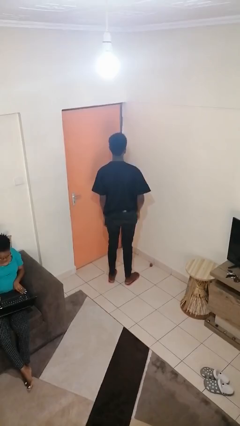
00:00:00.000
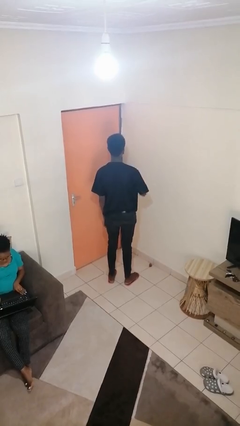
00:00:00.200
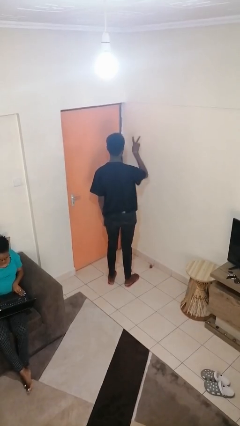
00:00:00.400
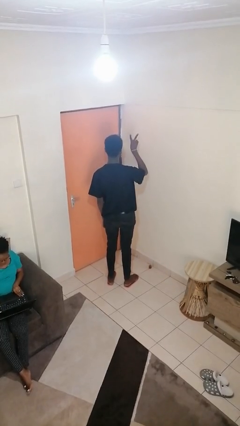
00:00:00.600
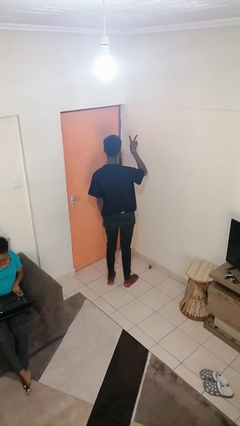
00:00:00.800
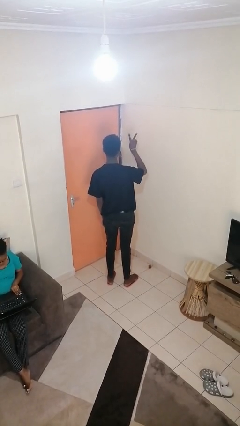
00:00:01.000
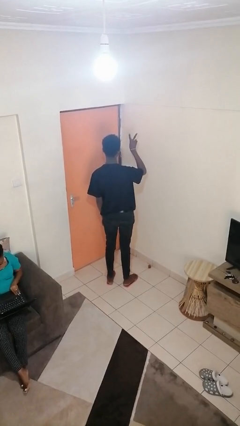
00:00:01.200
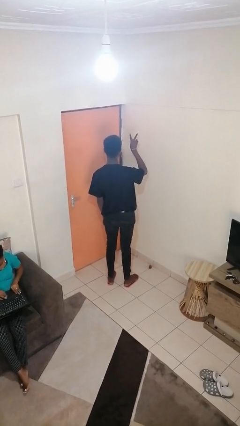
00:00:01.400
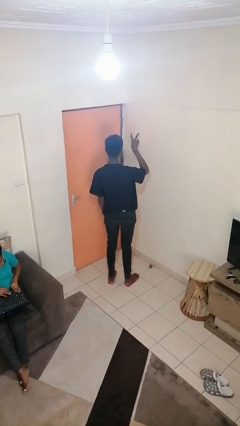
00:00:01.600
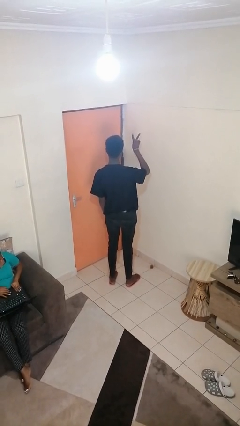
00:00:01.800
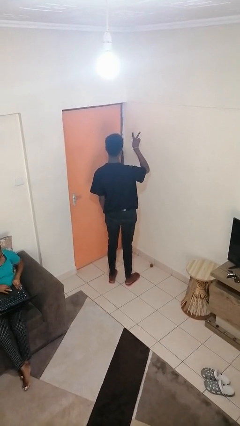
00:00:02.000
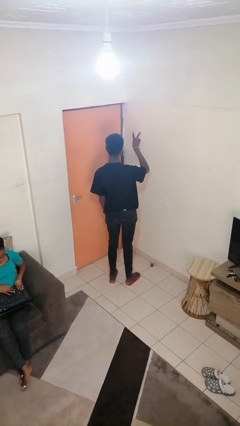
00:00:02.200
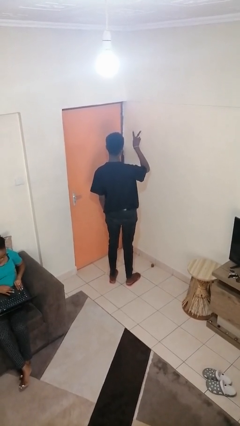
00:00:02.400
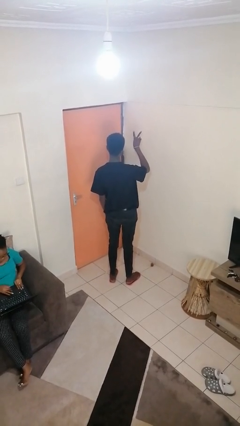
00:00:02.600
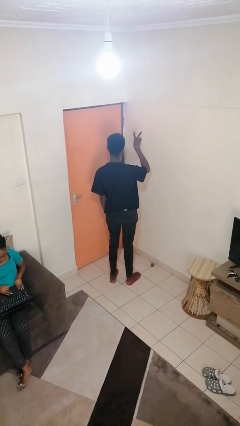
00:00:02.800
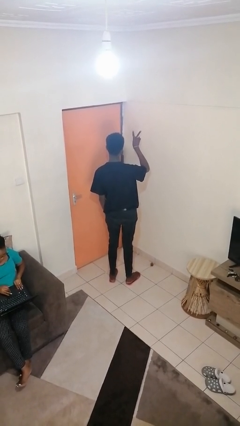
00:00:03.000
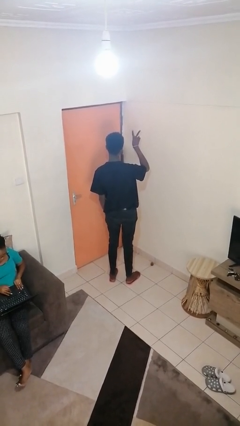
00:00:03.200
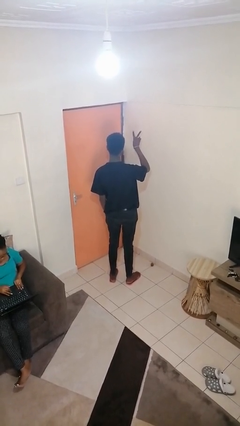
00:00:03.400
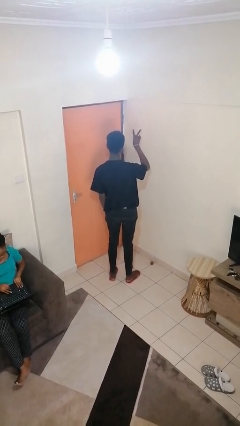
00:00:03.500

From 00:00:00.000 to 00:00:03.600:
person gestures peace

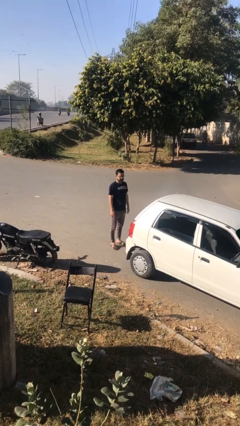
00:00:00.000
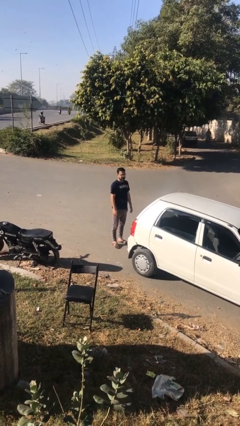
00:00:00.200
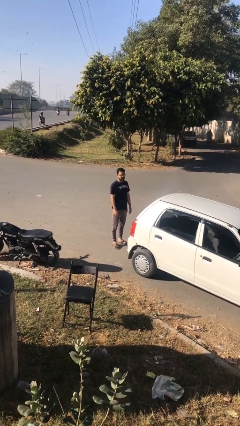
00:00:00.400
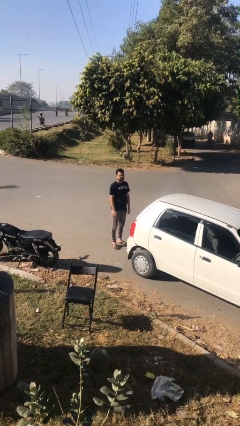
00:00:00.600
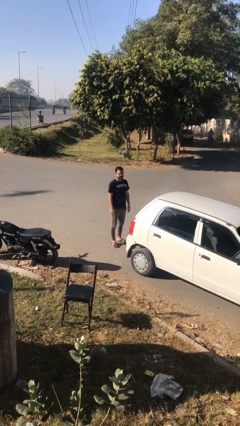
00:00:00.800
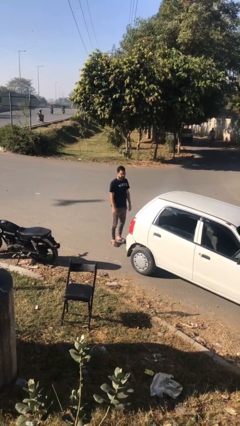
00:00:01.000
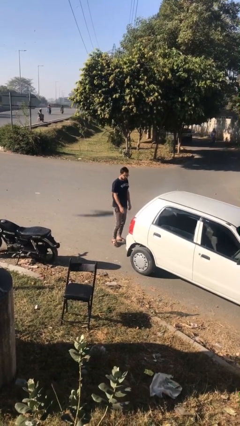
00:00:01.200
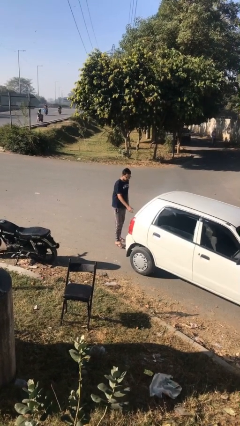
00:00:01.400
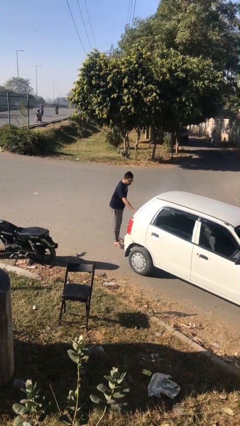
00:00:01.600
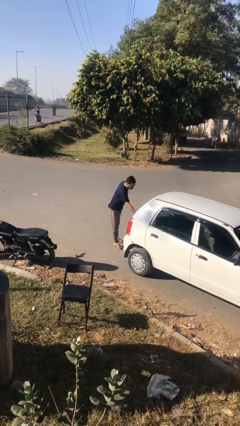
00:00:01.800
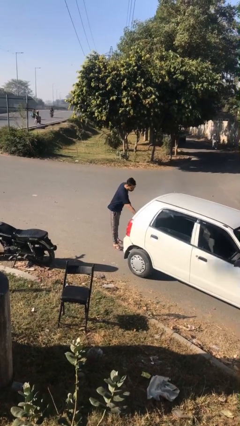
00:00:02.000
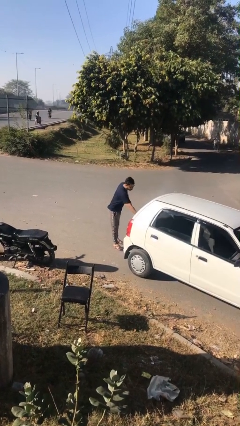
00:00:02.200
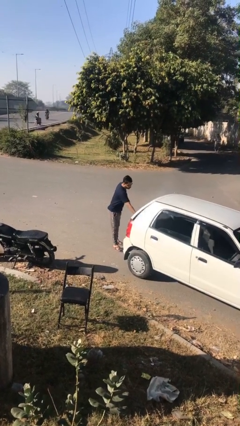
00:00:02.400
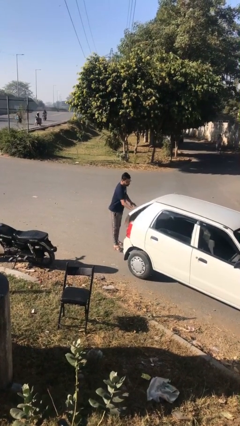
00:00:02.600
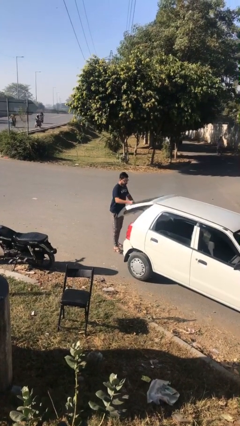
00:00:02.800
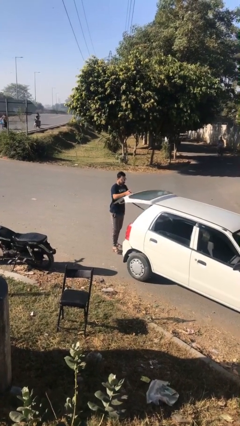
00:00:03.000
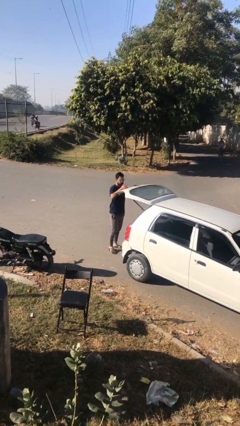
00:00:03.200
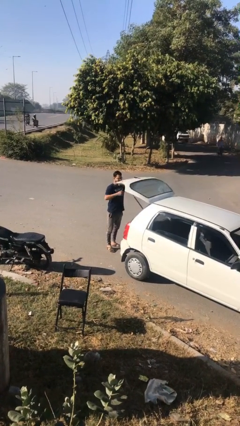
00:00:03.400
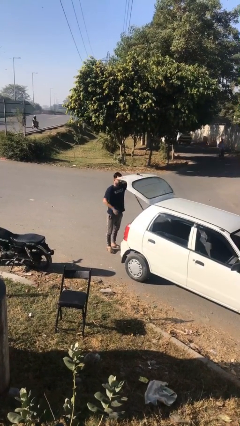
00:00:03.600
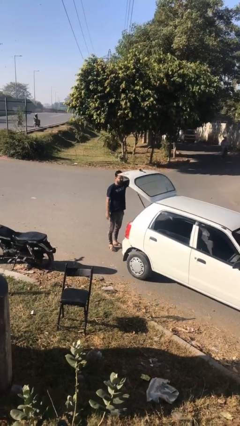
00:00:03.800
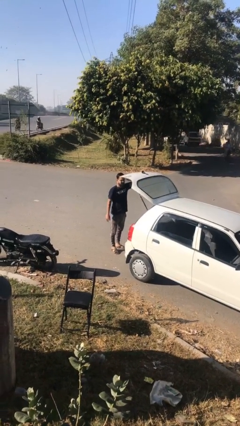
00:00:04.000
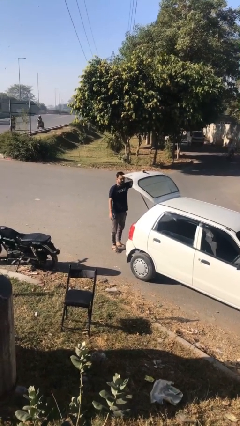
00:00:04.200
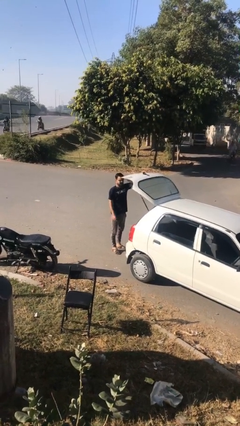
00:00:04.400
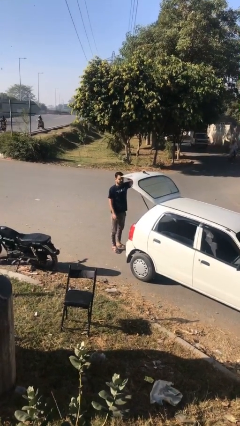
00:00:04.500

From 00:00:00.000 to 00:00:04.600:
person opens car trunk

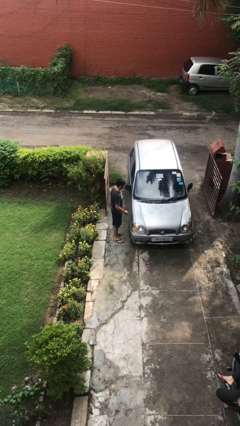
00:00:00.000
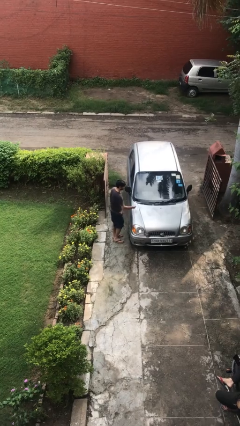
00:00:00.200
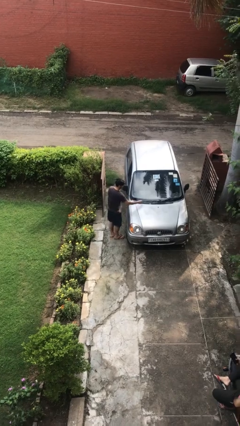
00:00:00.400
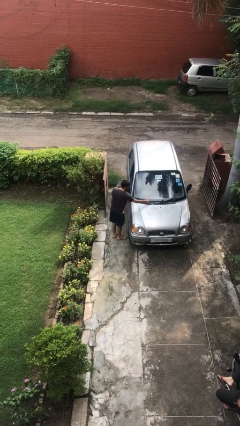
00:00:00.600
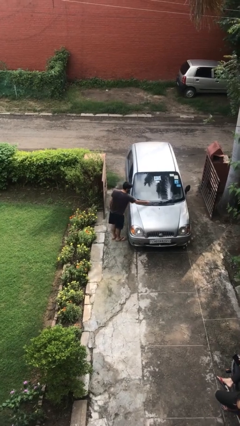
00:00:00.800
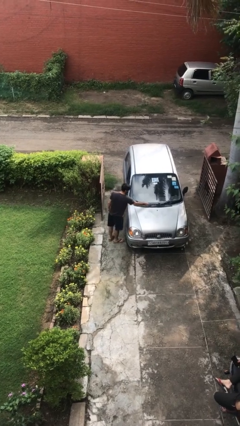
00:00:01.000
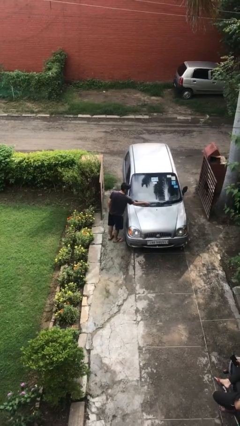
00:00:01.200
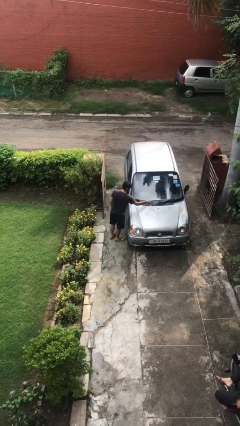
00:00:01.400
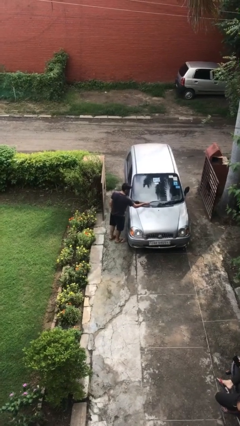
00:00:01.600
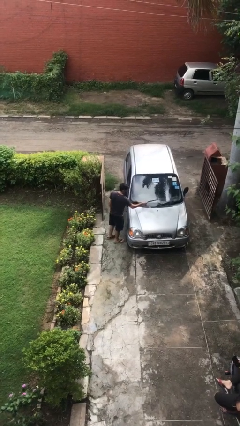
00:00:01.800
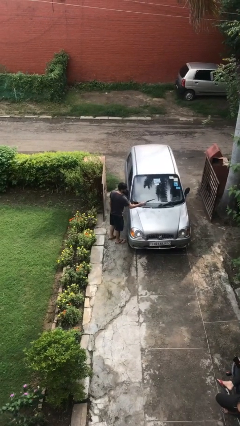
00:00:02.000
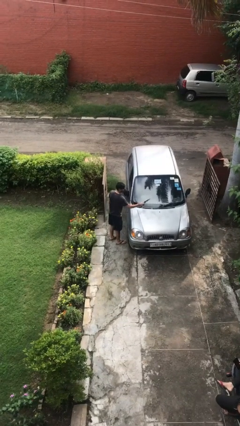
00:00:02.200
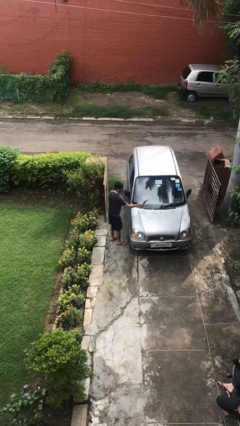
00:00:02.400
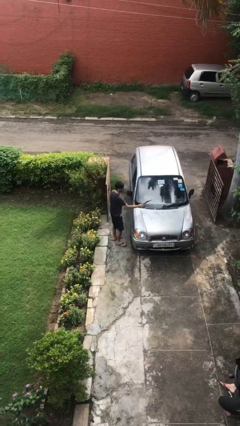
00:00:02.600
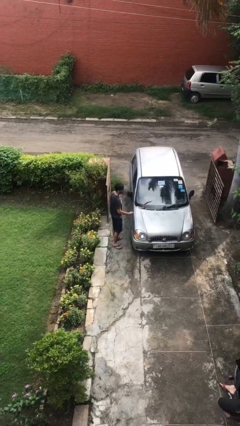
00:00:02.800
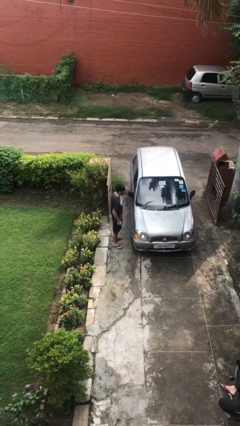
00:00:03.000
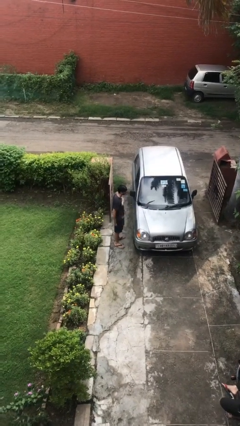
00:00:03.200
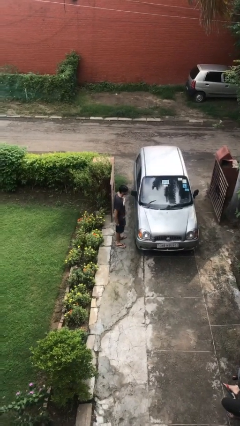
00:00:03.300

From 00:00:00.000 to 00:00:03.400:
person flips up car wipers

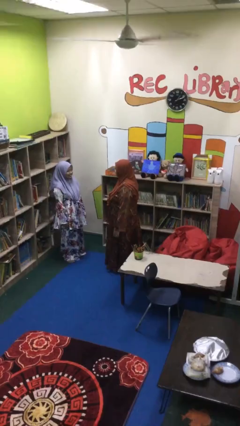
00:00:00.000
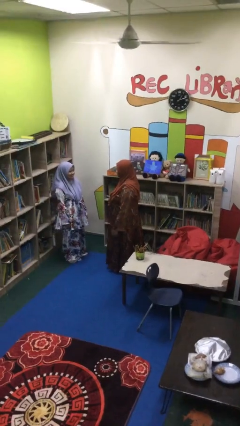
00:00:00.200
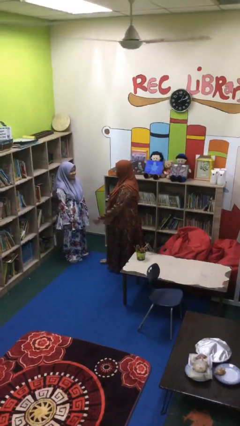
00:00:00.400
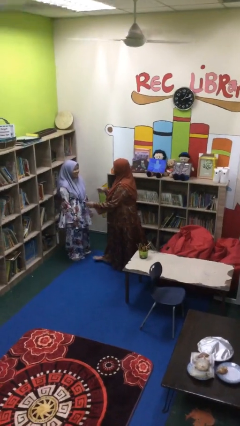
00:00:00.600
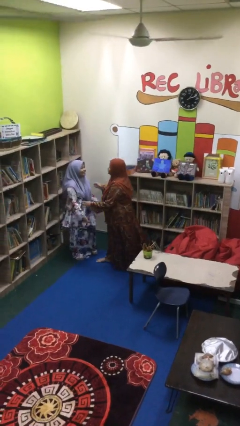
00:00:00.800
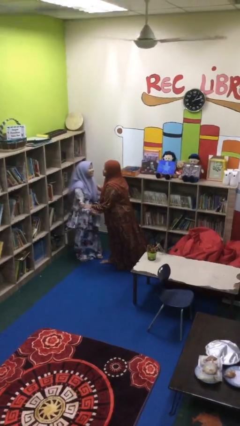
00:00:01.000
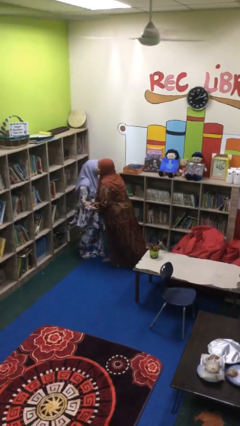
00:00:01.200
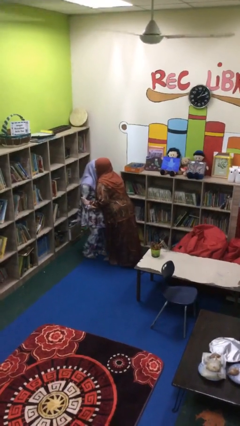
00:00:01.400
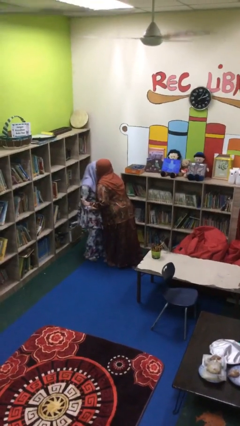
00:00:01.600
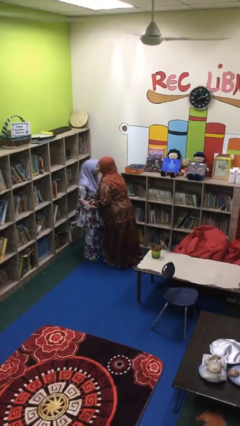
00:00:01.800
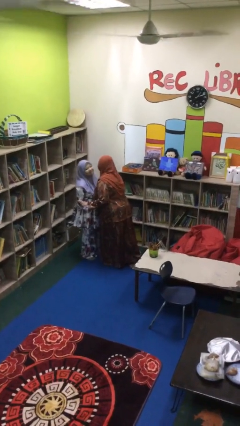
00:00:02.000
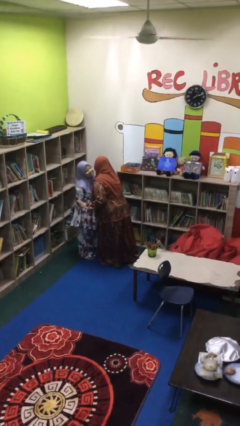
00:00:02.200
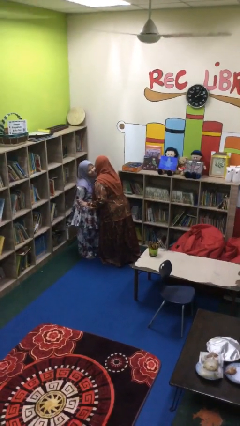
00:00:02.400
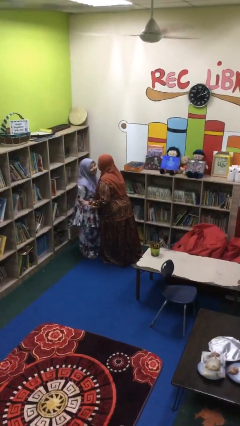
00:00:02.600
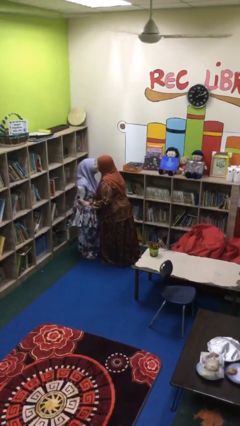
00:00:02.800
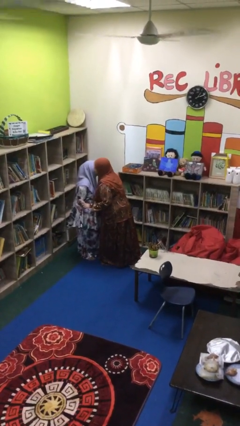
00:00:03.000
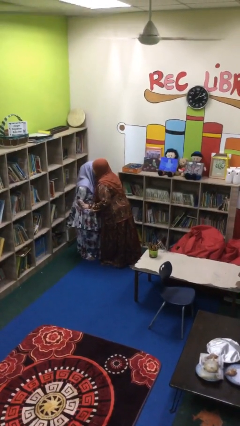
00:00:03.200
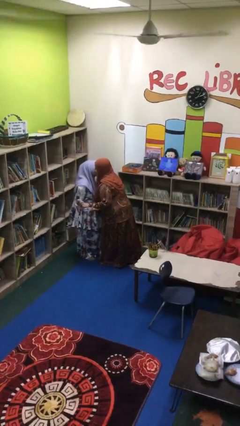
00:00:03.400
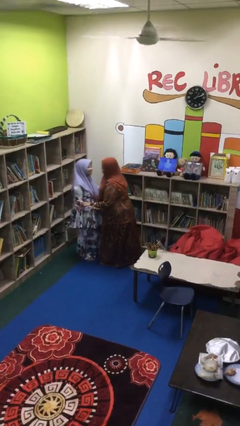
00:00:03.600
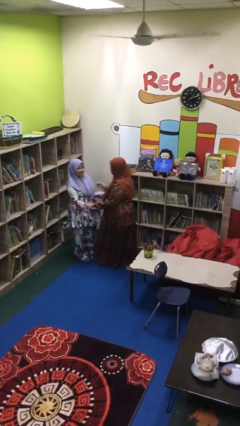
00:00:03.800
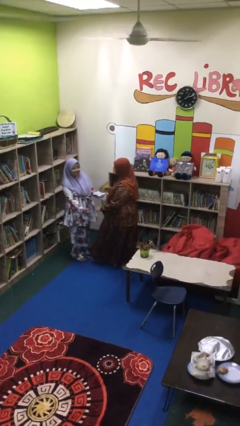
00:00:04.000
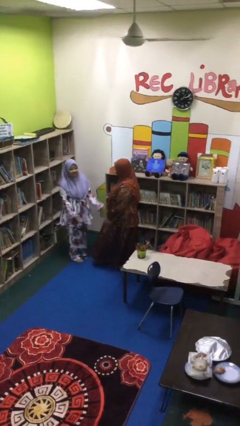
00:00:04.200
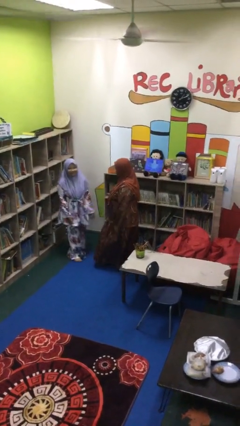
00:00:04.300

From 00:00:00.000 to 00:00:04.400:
person embraces person

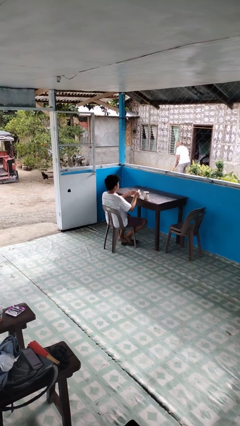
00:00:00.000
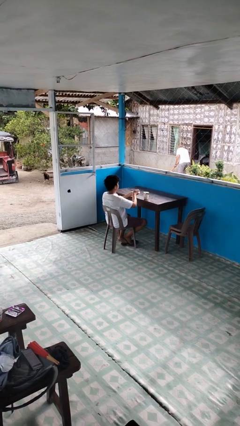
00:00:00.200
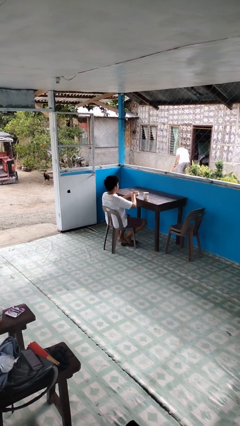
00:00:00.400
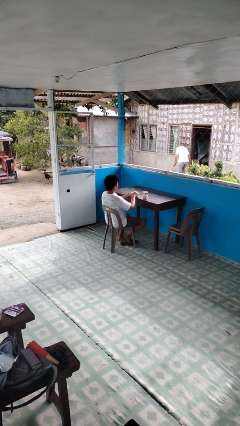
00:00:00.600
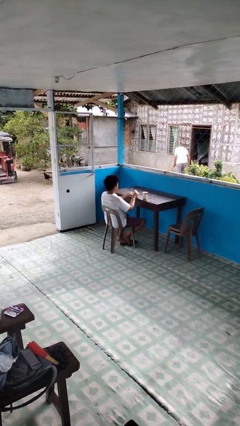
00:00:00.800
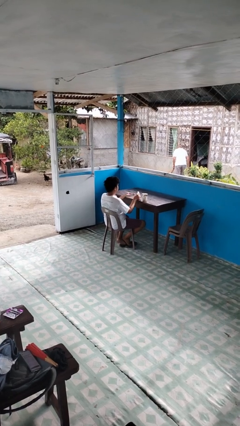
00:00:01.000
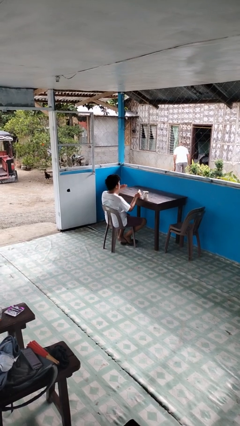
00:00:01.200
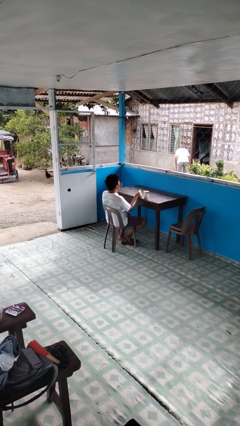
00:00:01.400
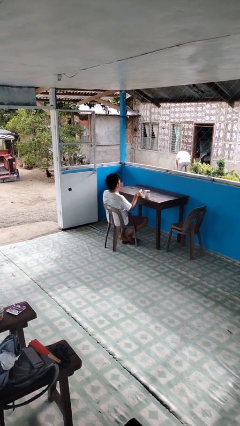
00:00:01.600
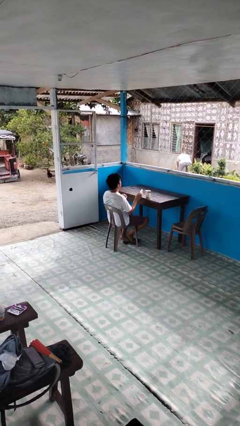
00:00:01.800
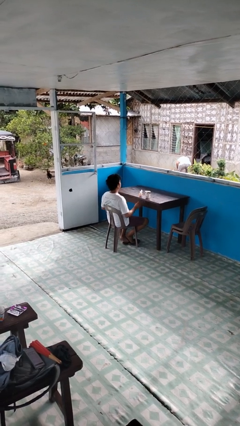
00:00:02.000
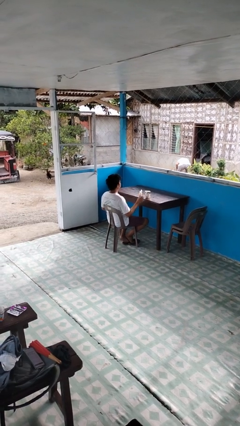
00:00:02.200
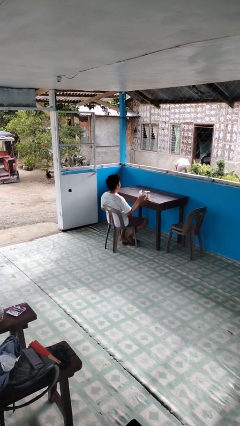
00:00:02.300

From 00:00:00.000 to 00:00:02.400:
person takes medicine pills
